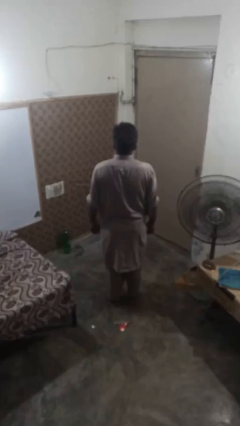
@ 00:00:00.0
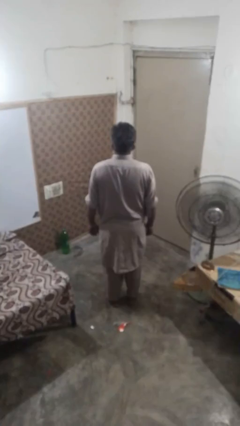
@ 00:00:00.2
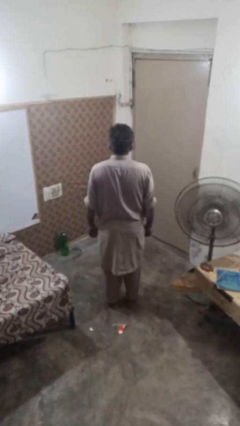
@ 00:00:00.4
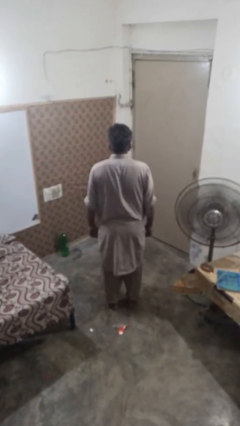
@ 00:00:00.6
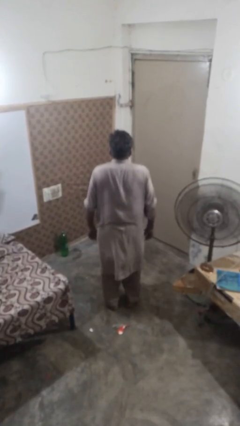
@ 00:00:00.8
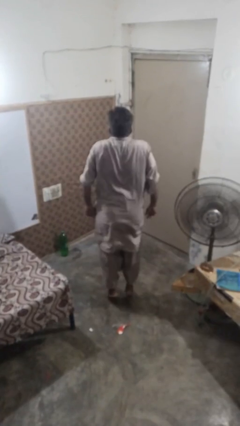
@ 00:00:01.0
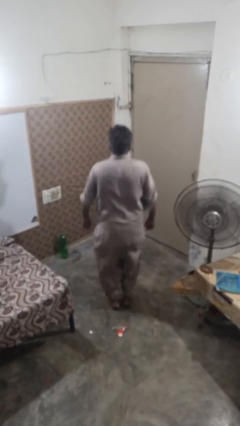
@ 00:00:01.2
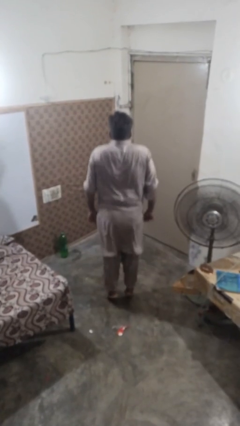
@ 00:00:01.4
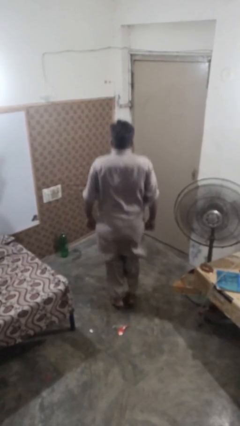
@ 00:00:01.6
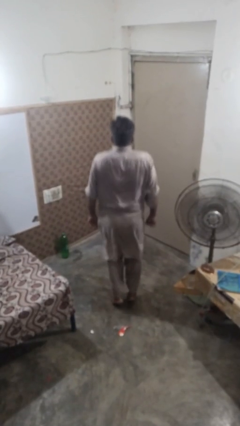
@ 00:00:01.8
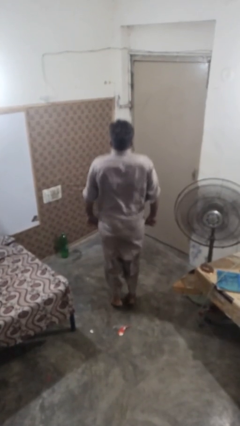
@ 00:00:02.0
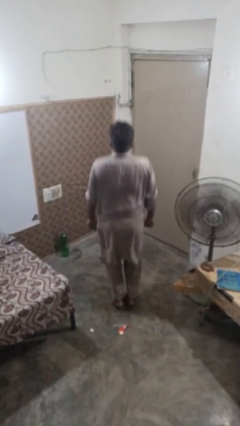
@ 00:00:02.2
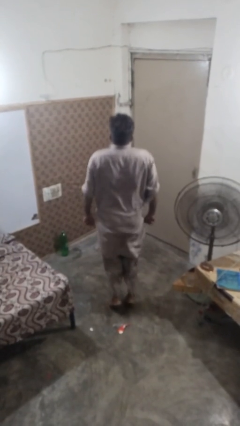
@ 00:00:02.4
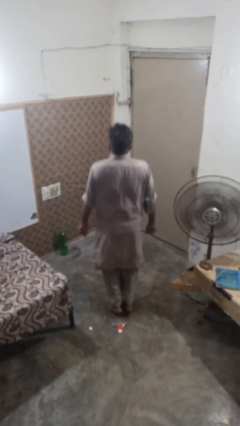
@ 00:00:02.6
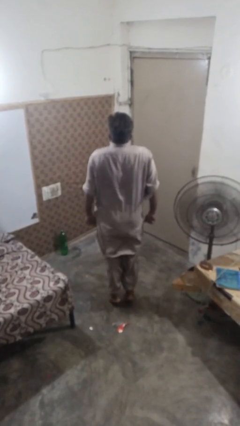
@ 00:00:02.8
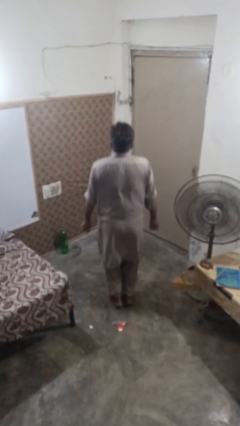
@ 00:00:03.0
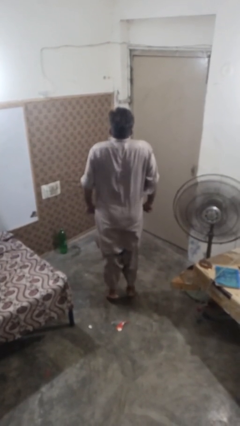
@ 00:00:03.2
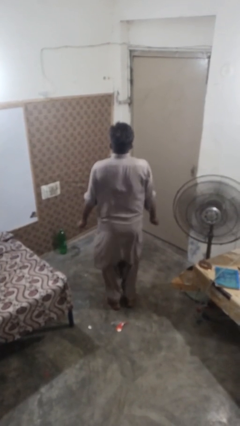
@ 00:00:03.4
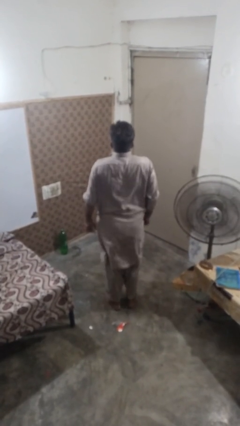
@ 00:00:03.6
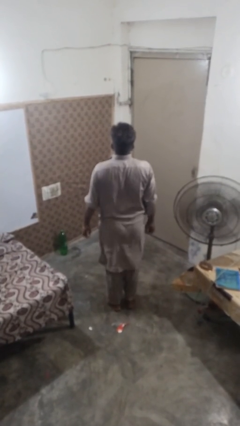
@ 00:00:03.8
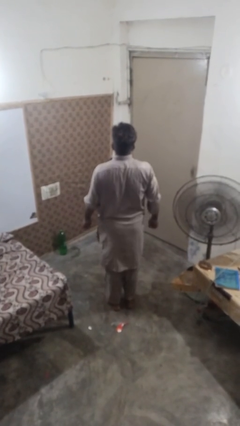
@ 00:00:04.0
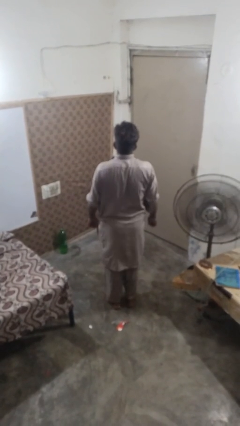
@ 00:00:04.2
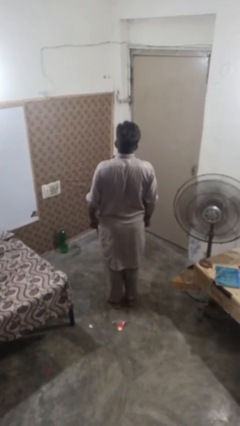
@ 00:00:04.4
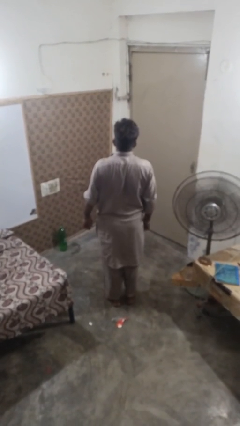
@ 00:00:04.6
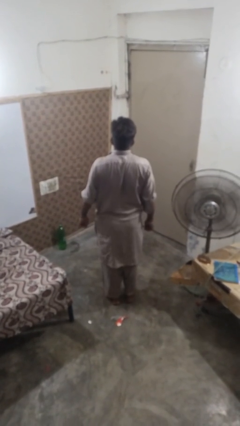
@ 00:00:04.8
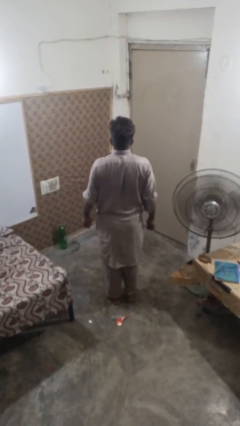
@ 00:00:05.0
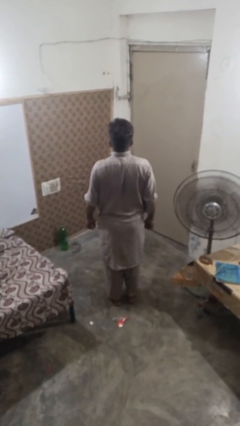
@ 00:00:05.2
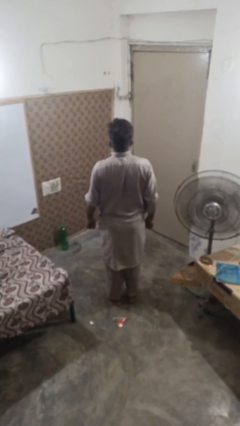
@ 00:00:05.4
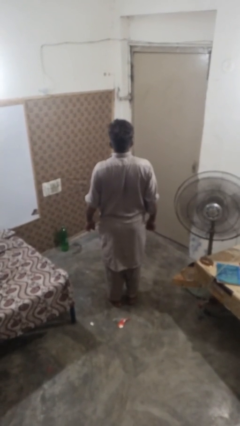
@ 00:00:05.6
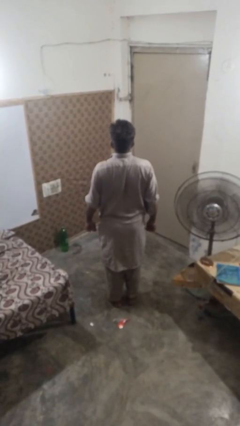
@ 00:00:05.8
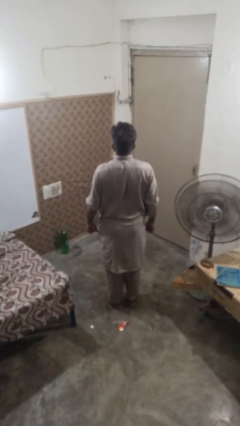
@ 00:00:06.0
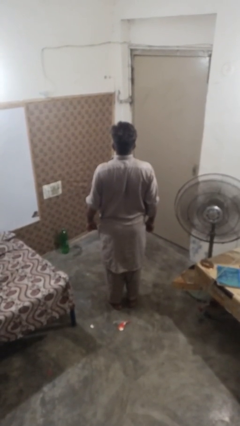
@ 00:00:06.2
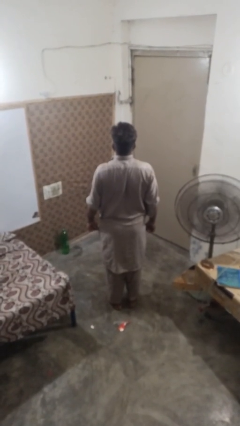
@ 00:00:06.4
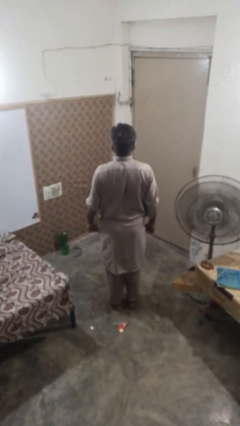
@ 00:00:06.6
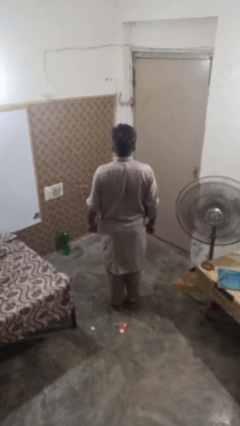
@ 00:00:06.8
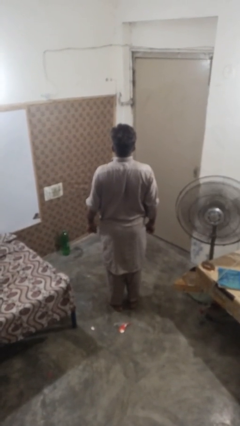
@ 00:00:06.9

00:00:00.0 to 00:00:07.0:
person jumps

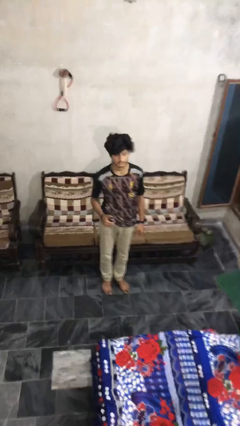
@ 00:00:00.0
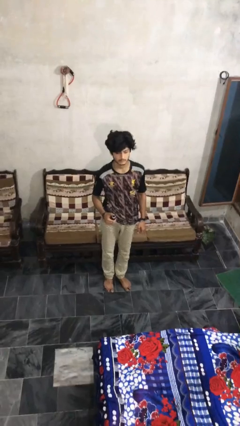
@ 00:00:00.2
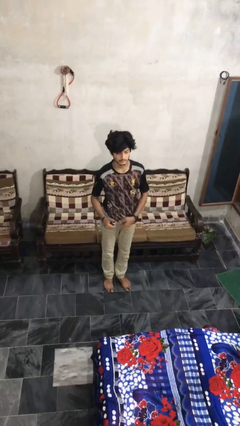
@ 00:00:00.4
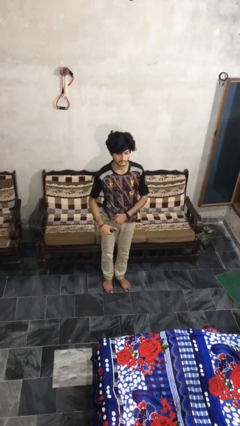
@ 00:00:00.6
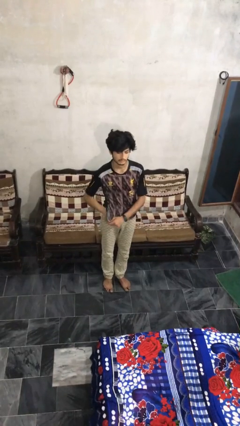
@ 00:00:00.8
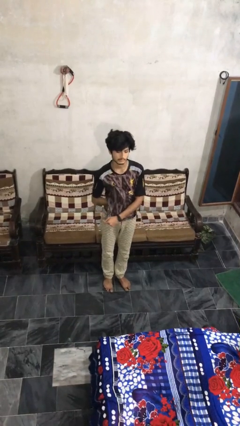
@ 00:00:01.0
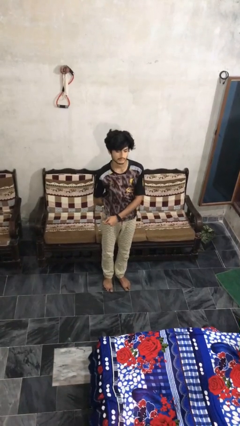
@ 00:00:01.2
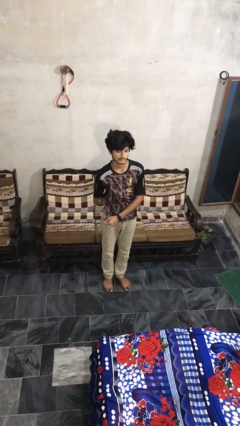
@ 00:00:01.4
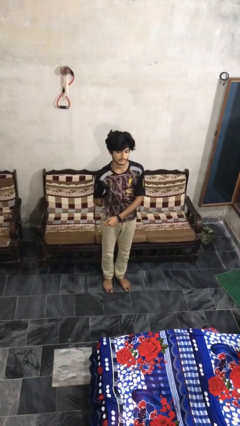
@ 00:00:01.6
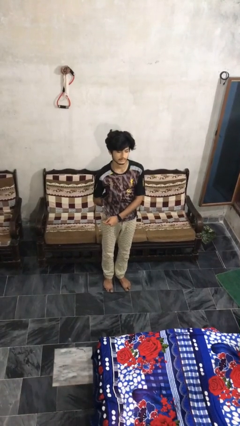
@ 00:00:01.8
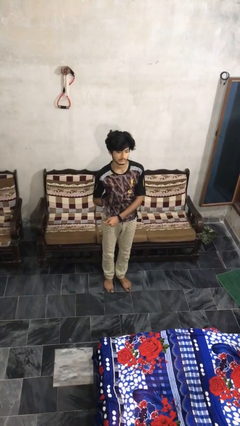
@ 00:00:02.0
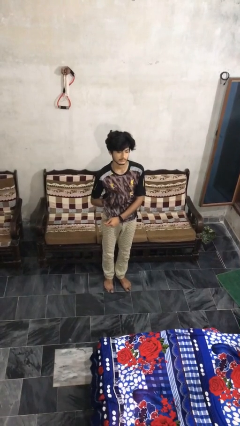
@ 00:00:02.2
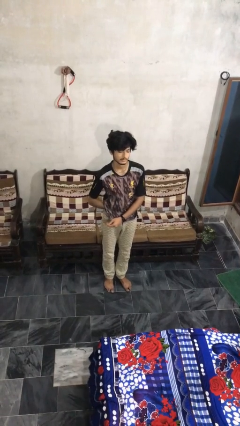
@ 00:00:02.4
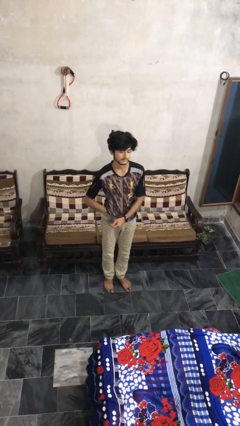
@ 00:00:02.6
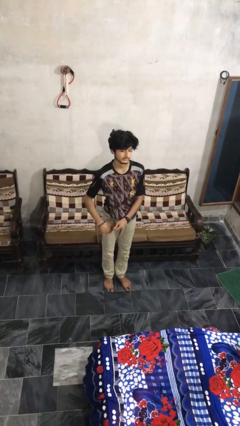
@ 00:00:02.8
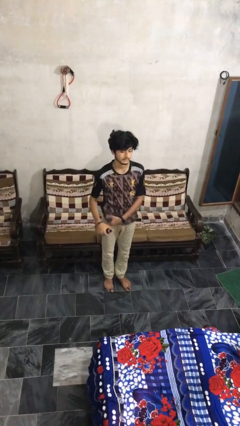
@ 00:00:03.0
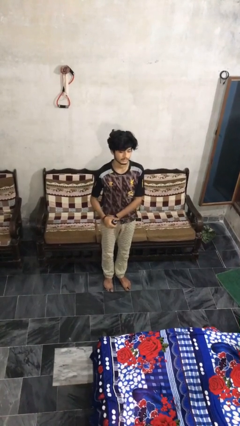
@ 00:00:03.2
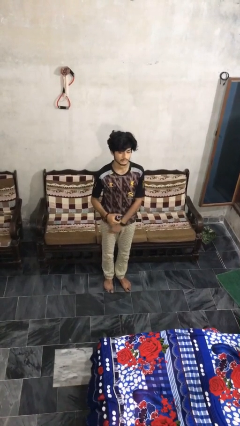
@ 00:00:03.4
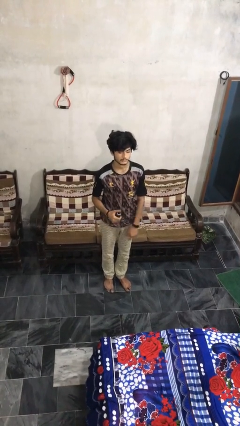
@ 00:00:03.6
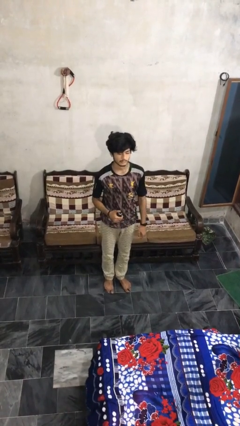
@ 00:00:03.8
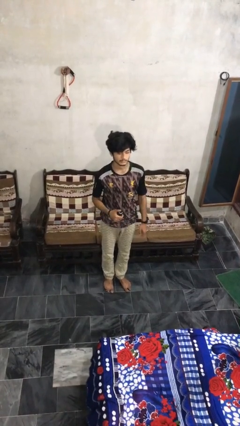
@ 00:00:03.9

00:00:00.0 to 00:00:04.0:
person applies deodorant

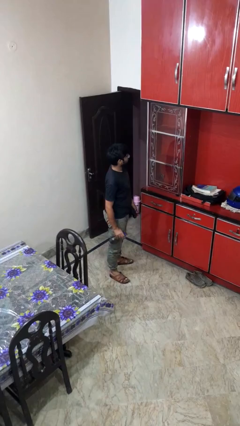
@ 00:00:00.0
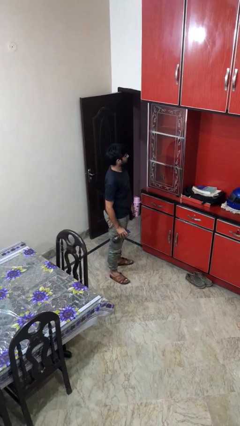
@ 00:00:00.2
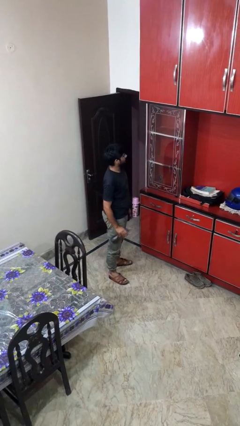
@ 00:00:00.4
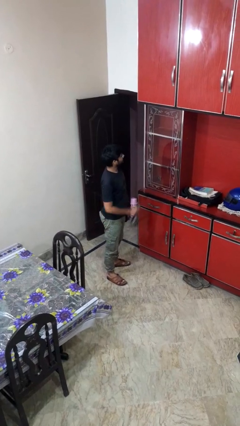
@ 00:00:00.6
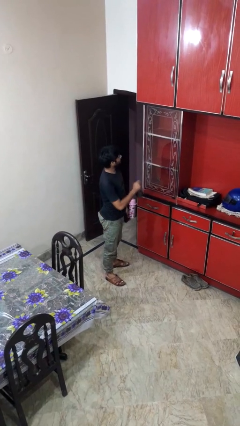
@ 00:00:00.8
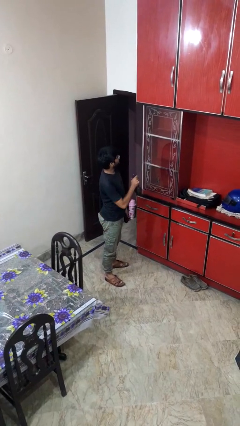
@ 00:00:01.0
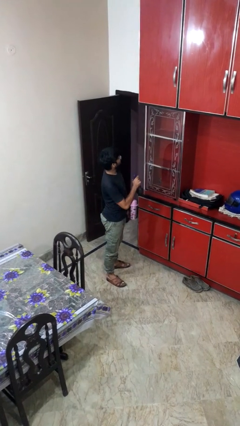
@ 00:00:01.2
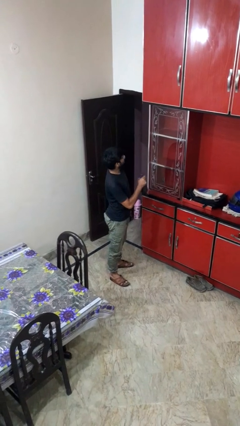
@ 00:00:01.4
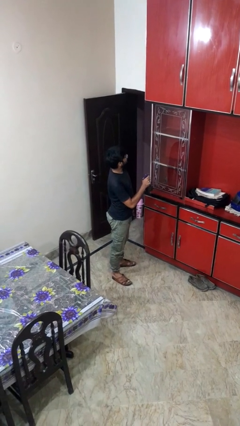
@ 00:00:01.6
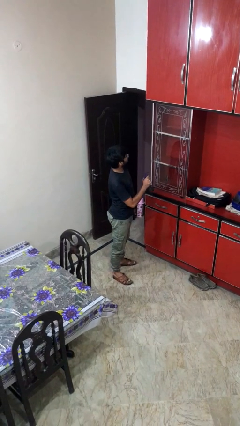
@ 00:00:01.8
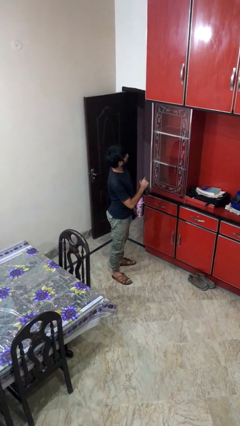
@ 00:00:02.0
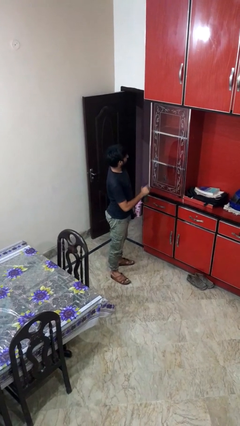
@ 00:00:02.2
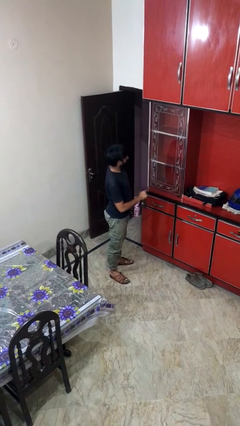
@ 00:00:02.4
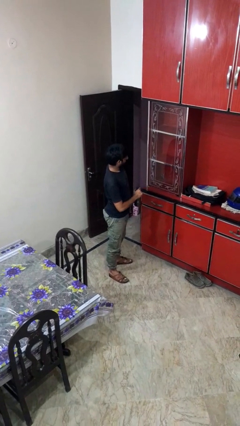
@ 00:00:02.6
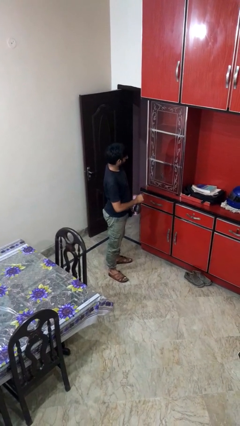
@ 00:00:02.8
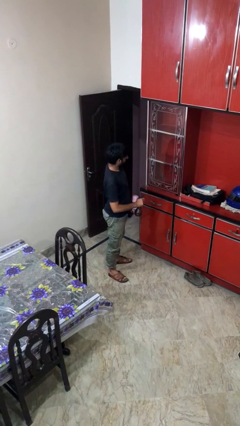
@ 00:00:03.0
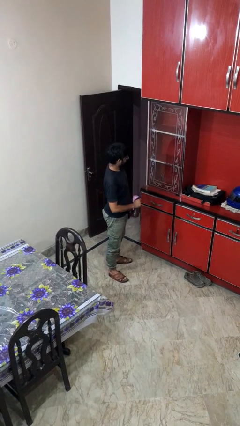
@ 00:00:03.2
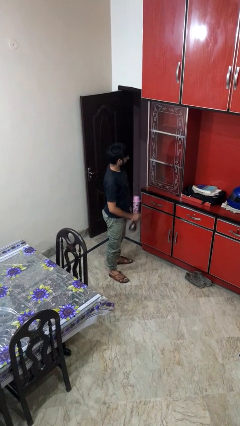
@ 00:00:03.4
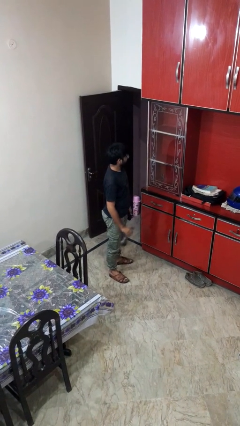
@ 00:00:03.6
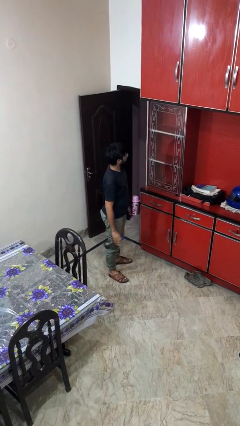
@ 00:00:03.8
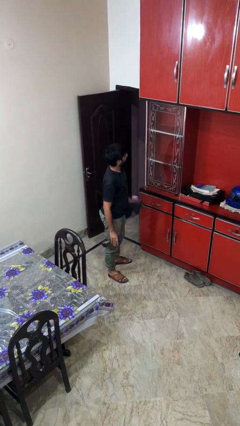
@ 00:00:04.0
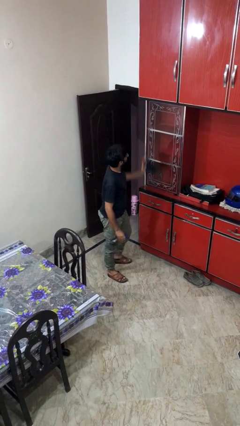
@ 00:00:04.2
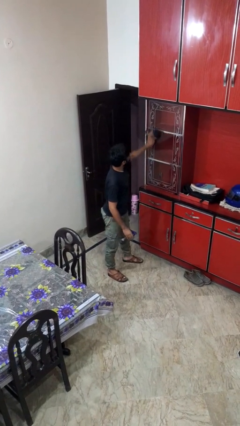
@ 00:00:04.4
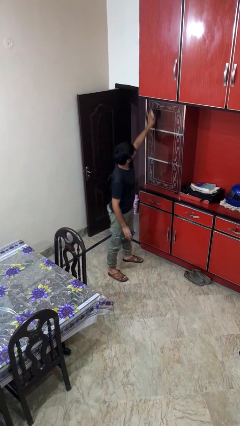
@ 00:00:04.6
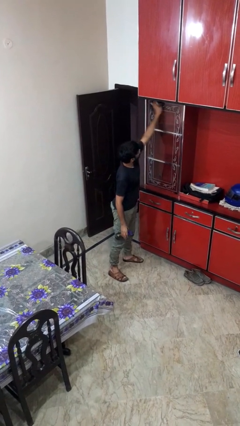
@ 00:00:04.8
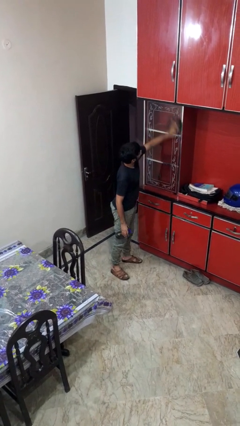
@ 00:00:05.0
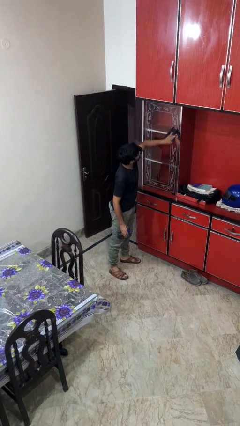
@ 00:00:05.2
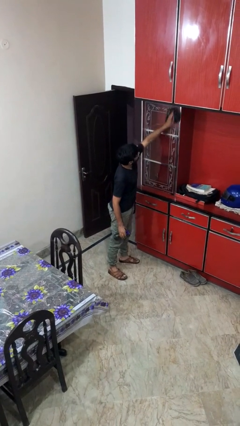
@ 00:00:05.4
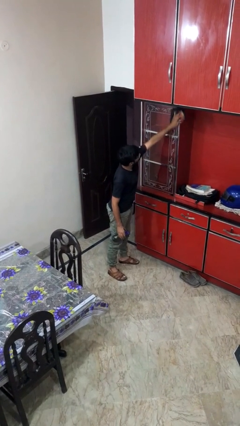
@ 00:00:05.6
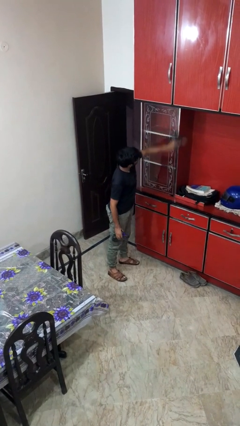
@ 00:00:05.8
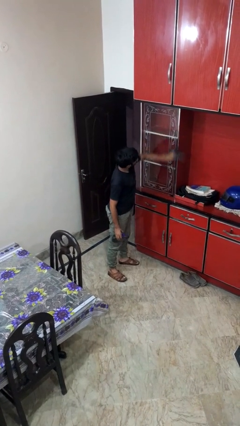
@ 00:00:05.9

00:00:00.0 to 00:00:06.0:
person sprays from bottle

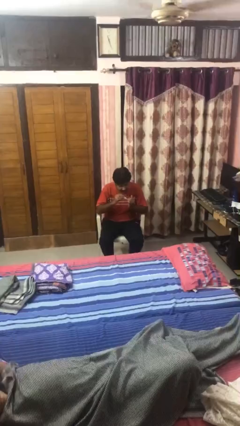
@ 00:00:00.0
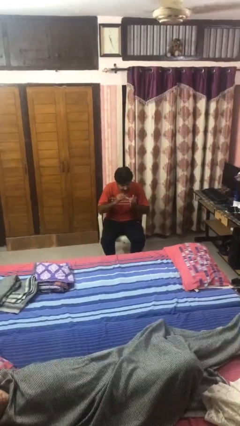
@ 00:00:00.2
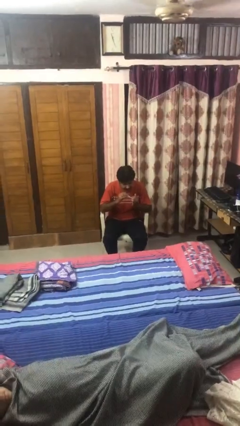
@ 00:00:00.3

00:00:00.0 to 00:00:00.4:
person clips fingernails

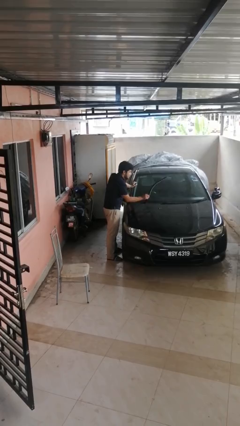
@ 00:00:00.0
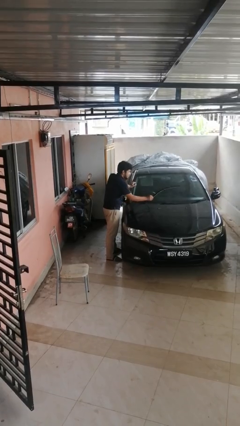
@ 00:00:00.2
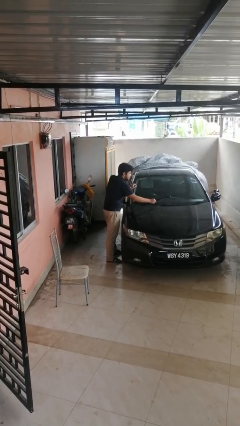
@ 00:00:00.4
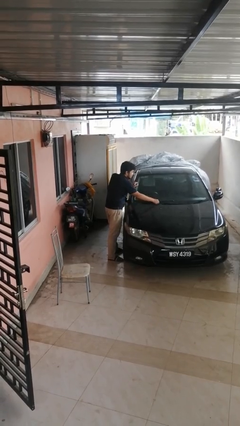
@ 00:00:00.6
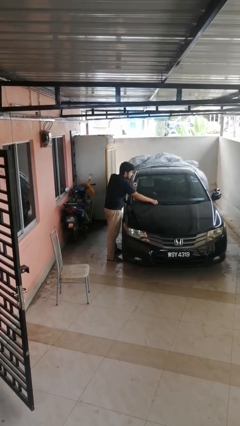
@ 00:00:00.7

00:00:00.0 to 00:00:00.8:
person flips down car wipers
